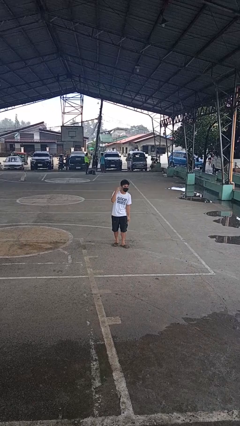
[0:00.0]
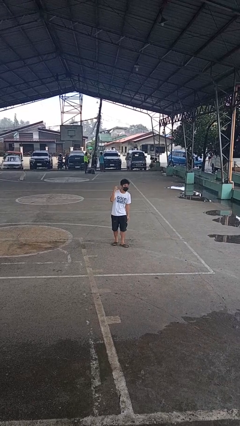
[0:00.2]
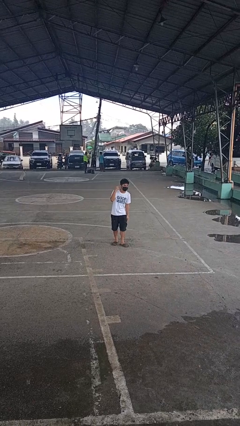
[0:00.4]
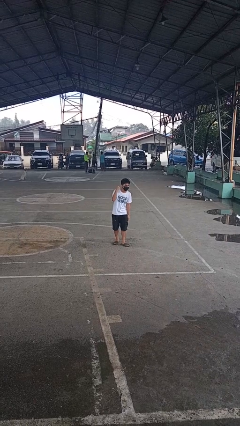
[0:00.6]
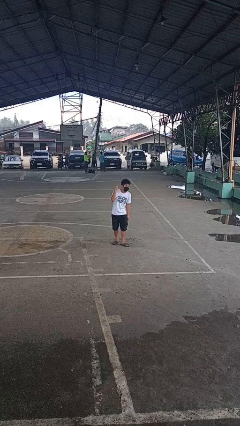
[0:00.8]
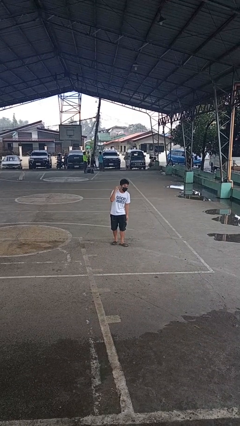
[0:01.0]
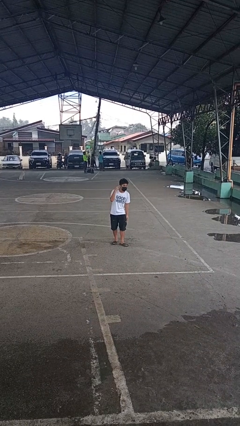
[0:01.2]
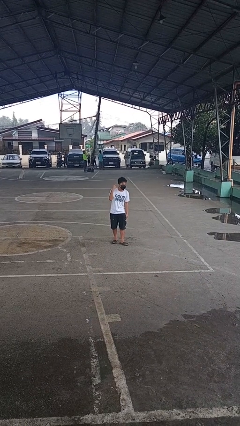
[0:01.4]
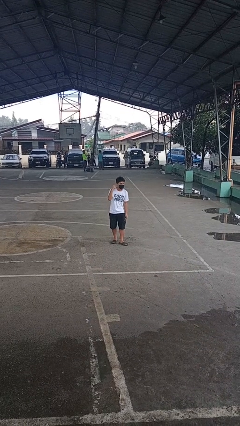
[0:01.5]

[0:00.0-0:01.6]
person gestures listen closely

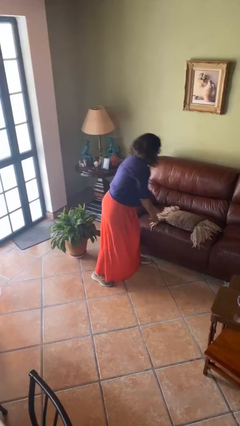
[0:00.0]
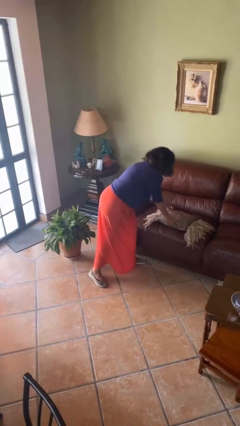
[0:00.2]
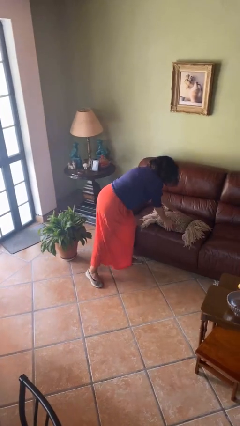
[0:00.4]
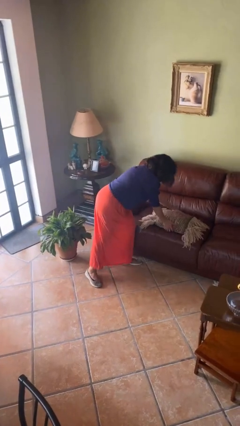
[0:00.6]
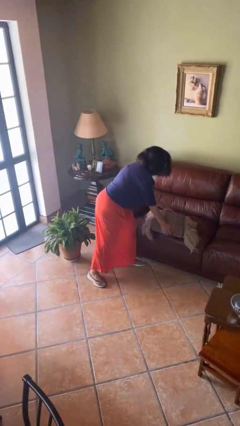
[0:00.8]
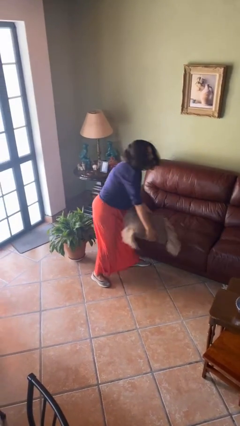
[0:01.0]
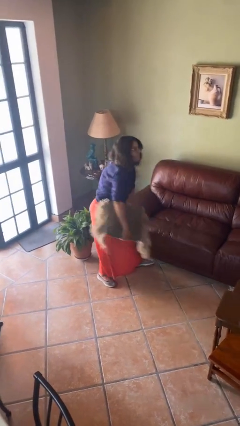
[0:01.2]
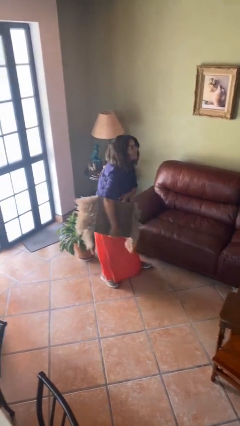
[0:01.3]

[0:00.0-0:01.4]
person picks up object from couch

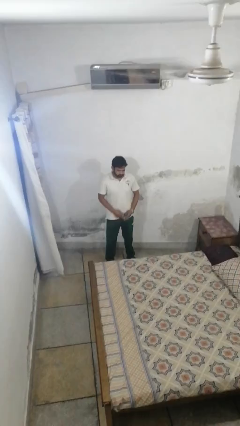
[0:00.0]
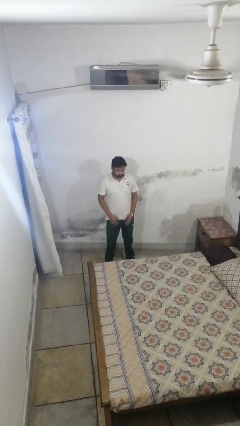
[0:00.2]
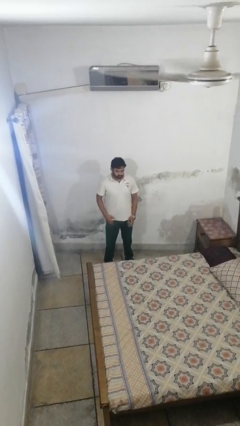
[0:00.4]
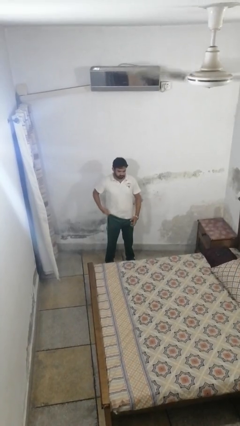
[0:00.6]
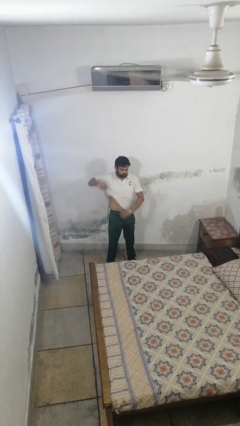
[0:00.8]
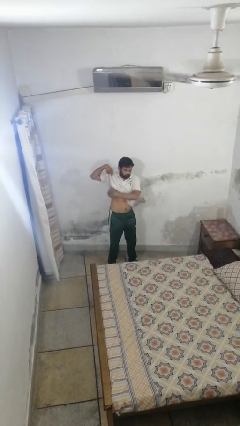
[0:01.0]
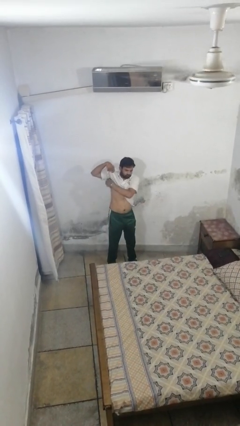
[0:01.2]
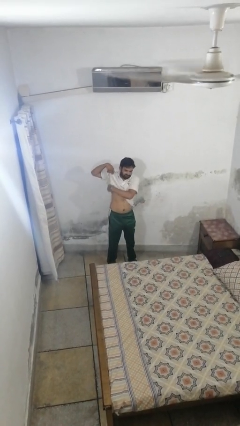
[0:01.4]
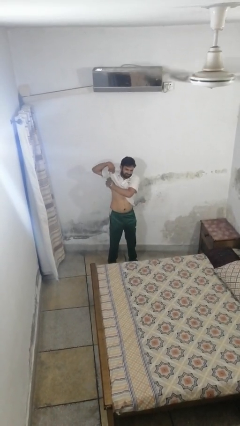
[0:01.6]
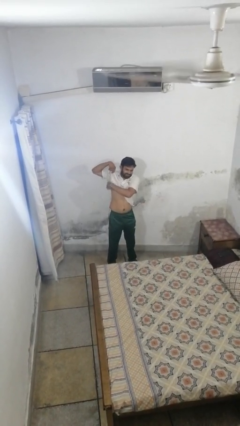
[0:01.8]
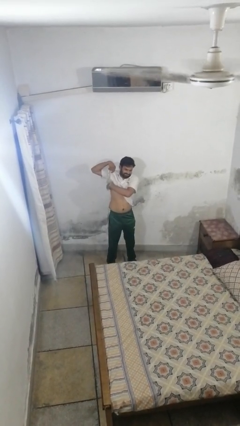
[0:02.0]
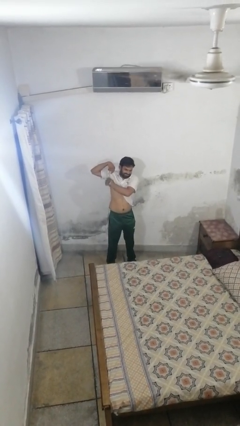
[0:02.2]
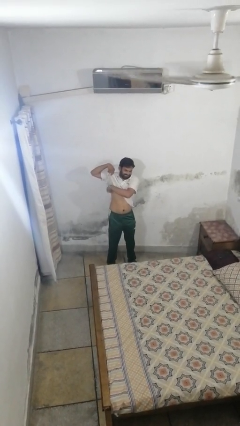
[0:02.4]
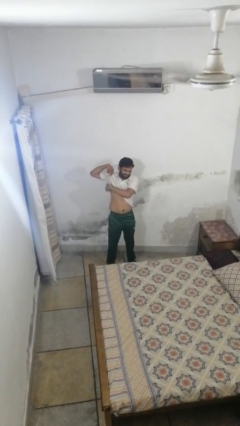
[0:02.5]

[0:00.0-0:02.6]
person applies deodorant

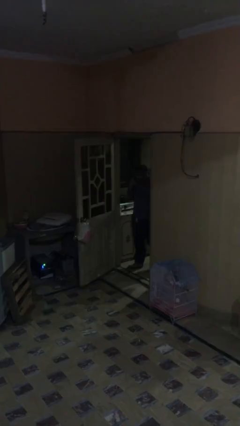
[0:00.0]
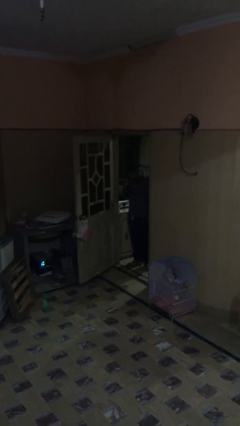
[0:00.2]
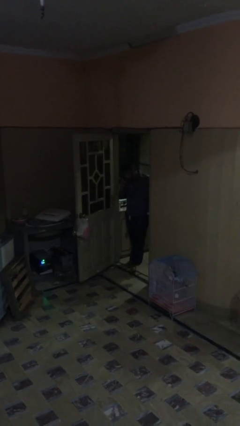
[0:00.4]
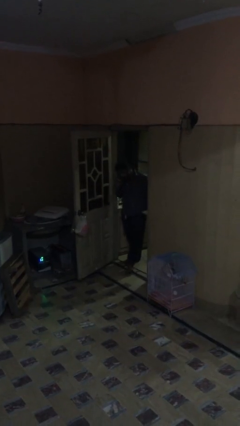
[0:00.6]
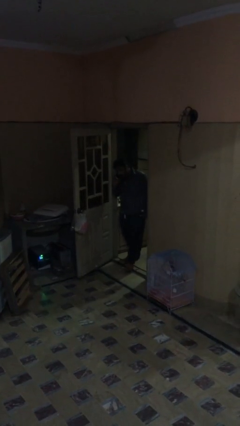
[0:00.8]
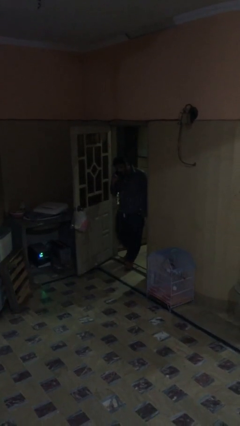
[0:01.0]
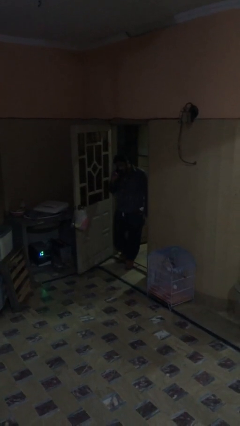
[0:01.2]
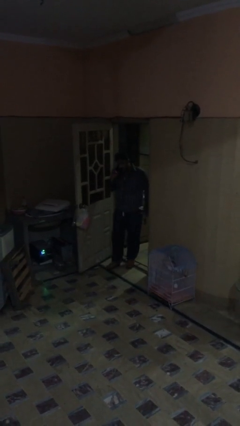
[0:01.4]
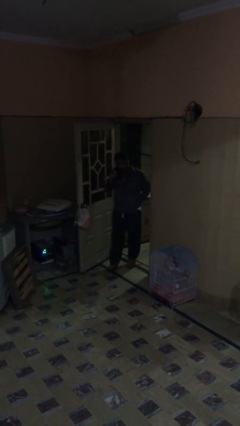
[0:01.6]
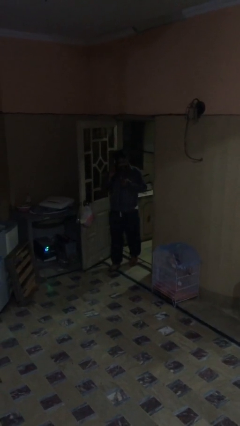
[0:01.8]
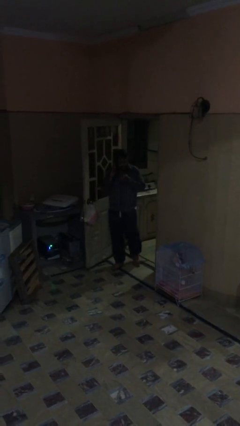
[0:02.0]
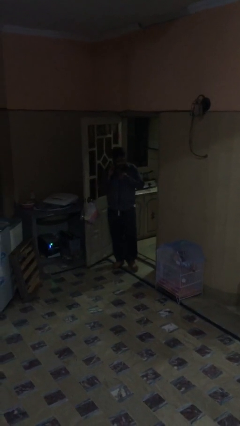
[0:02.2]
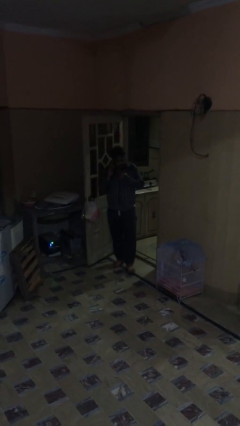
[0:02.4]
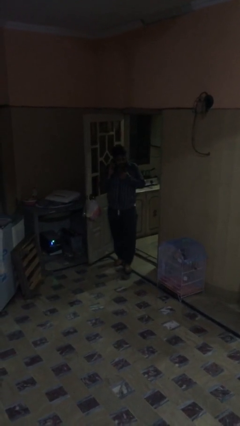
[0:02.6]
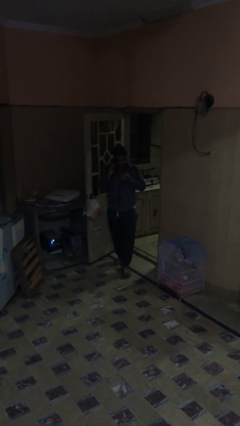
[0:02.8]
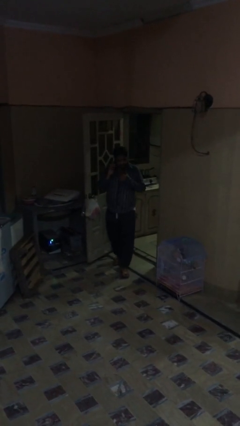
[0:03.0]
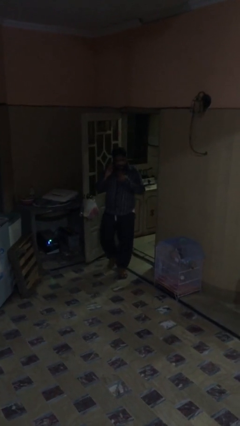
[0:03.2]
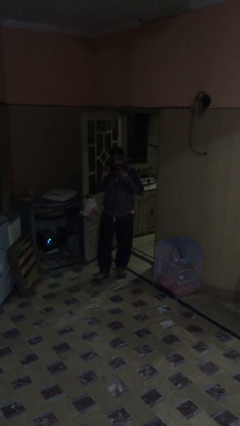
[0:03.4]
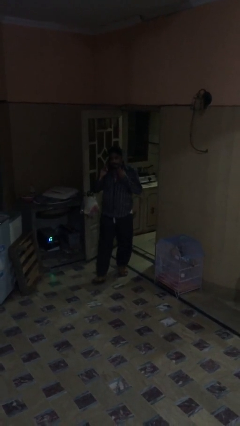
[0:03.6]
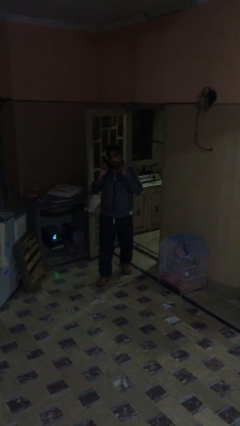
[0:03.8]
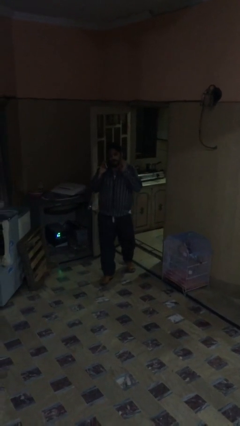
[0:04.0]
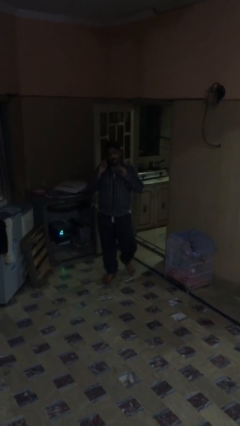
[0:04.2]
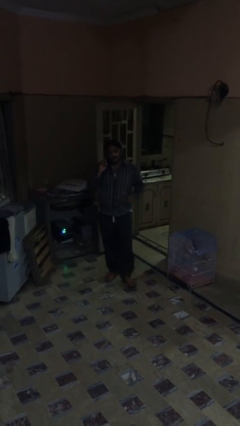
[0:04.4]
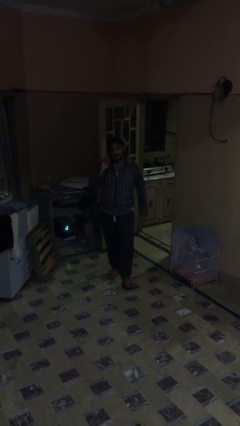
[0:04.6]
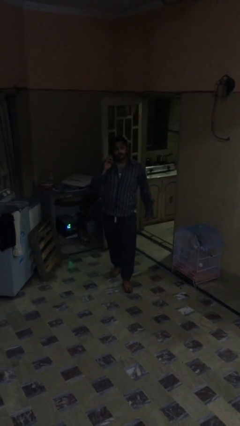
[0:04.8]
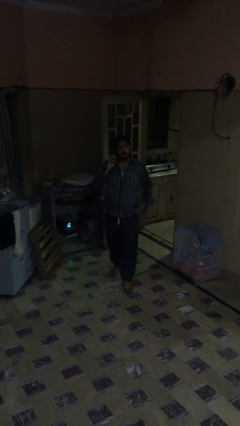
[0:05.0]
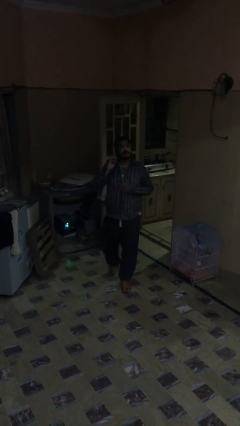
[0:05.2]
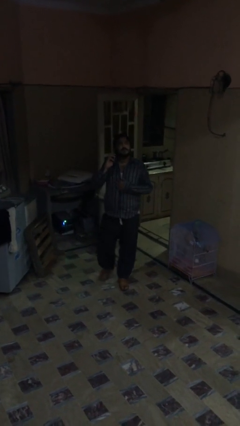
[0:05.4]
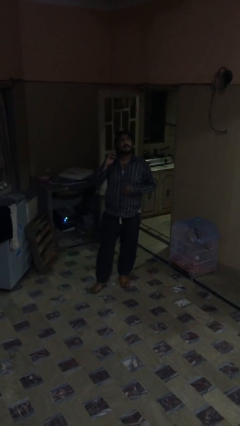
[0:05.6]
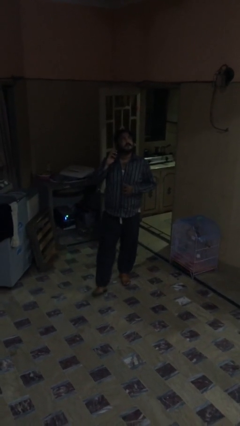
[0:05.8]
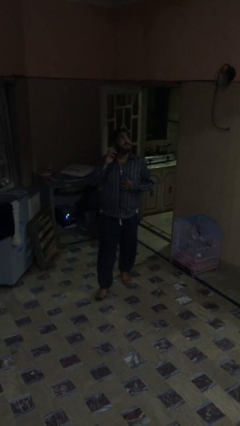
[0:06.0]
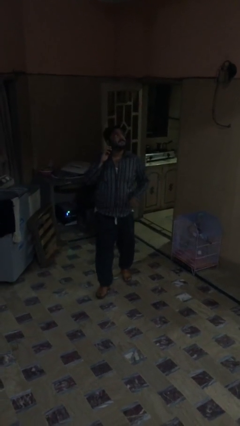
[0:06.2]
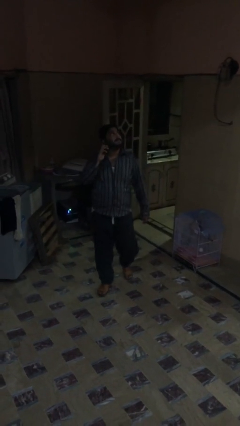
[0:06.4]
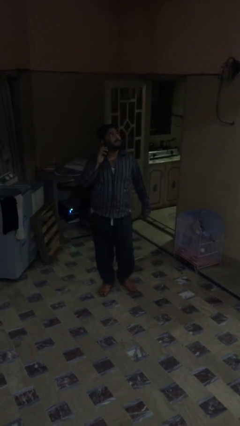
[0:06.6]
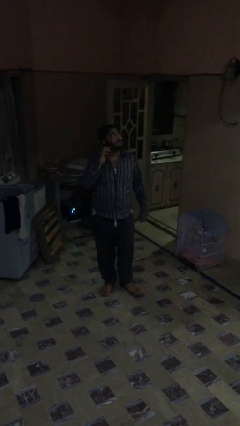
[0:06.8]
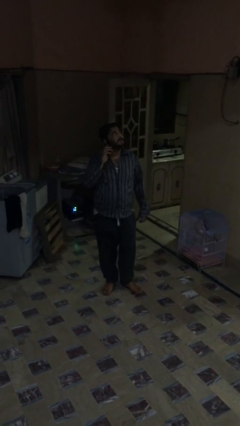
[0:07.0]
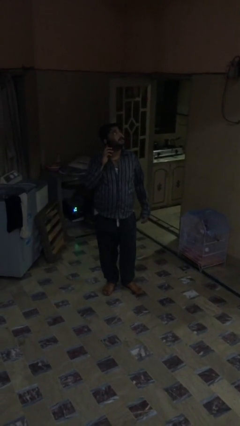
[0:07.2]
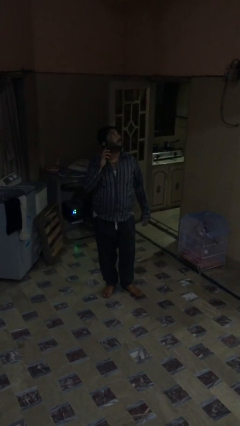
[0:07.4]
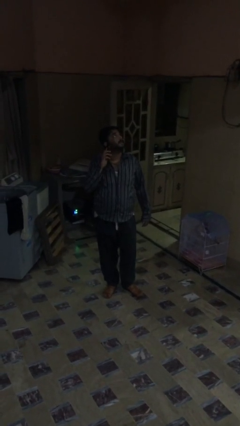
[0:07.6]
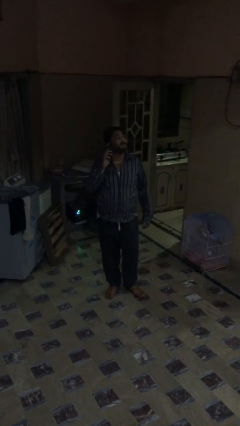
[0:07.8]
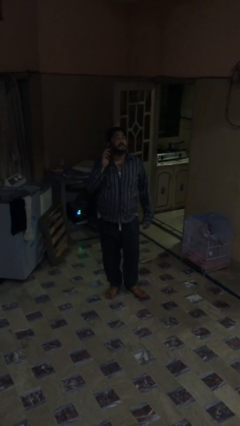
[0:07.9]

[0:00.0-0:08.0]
person enters scene through structure

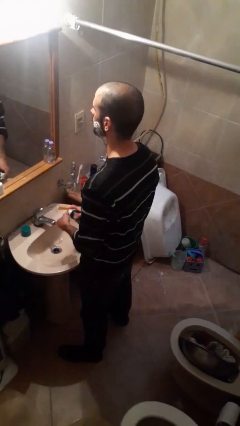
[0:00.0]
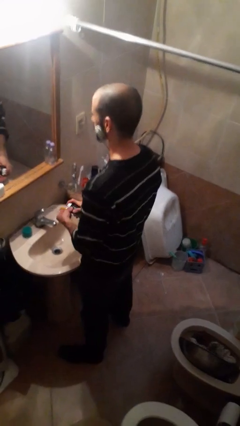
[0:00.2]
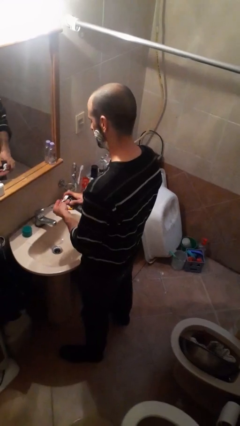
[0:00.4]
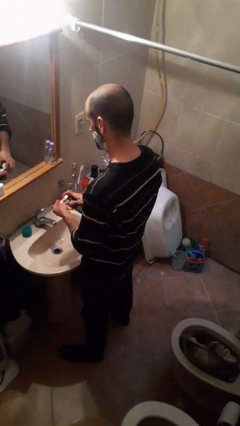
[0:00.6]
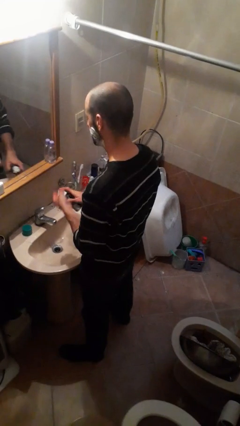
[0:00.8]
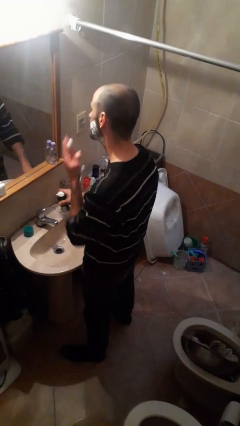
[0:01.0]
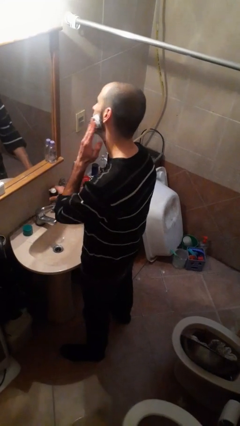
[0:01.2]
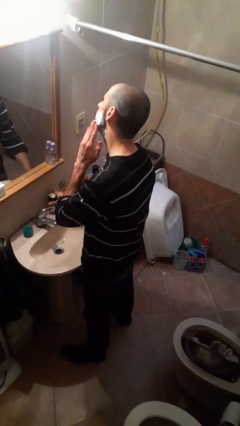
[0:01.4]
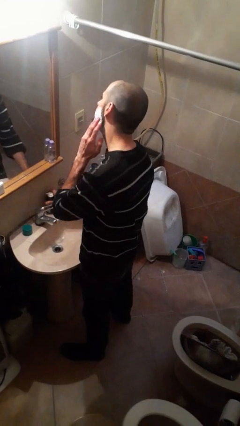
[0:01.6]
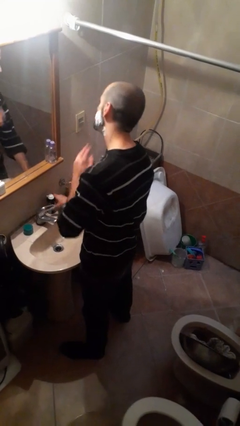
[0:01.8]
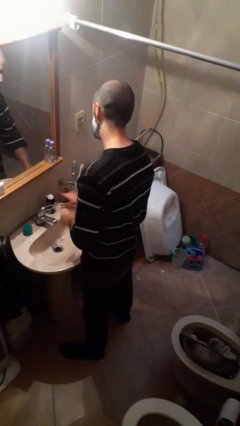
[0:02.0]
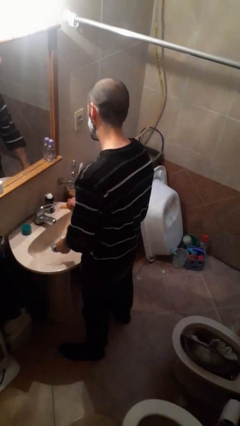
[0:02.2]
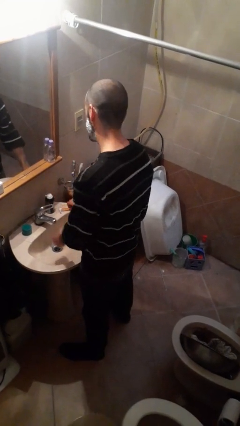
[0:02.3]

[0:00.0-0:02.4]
person applies shaving cream

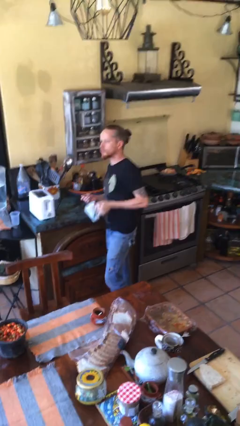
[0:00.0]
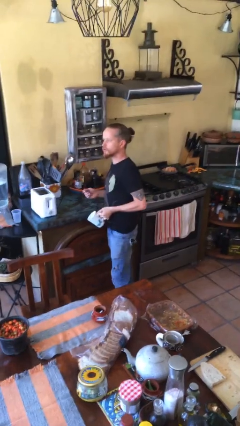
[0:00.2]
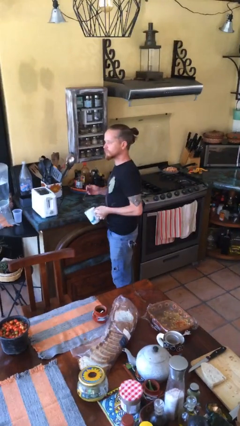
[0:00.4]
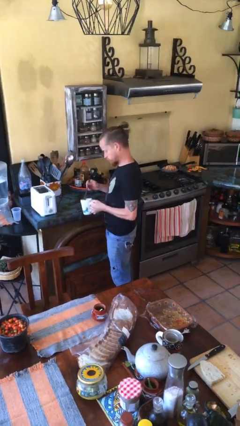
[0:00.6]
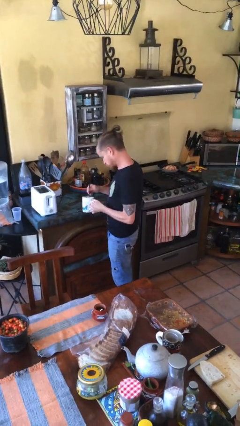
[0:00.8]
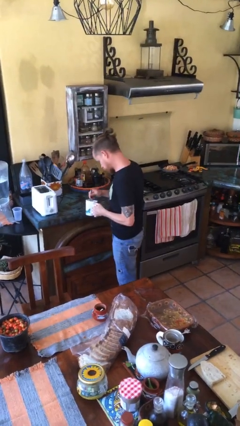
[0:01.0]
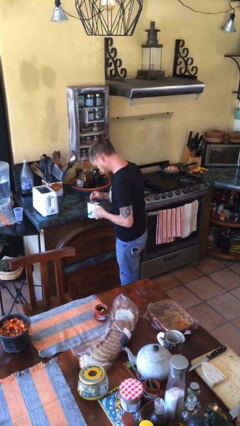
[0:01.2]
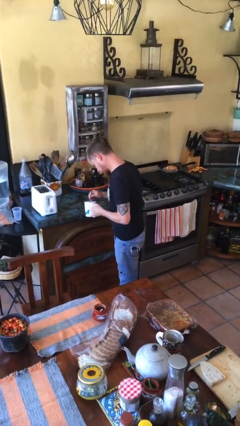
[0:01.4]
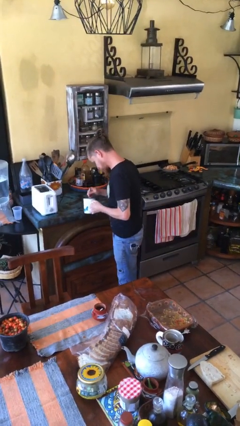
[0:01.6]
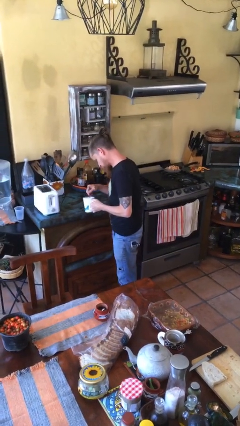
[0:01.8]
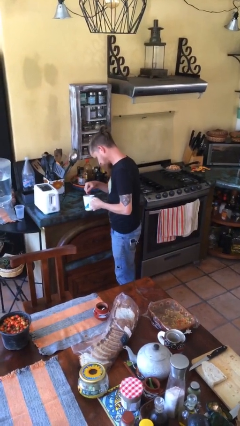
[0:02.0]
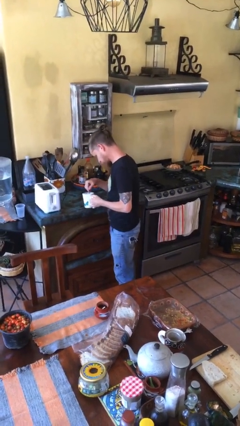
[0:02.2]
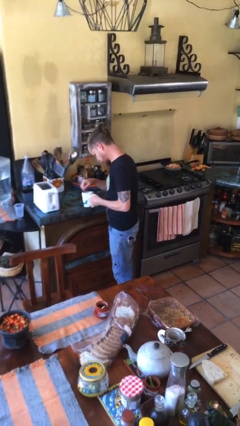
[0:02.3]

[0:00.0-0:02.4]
person stirs mug
